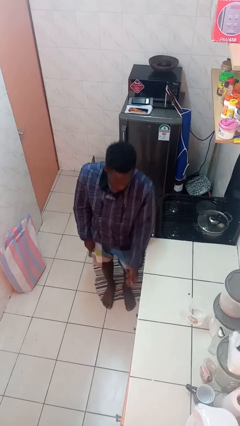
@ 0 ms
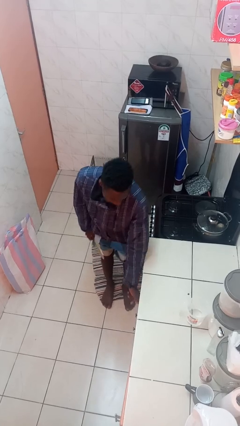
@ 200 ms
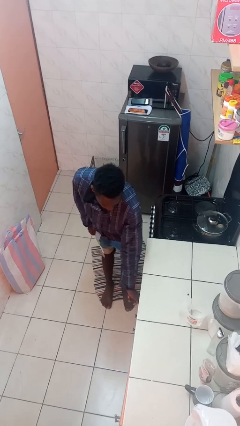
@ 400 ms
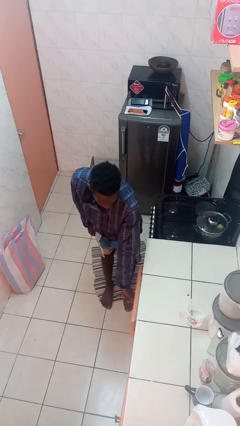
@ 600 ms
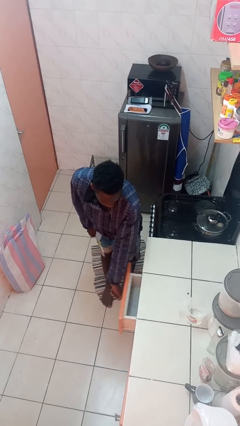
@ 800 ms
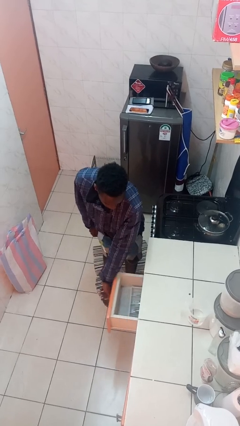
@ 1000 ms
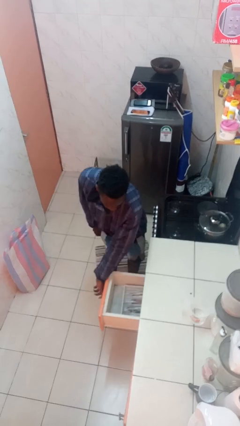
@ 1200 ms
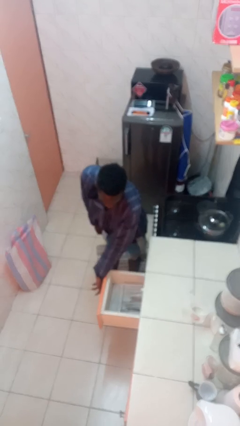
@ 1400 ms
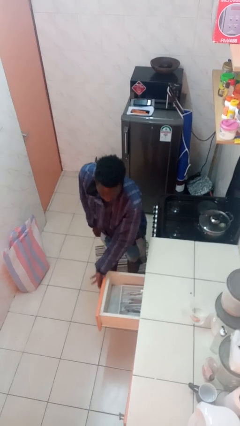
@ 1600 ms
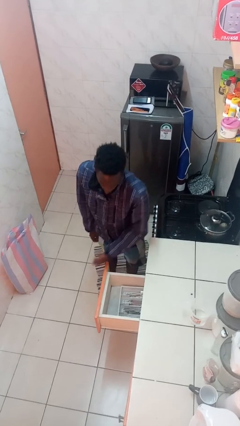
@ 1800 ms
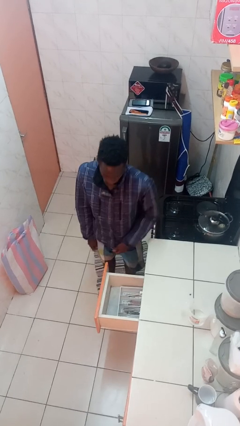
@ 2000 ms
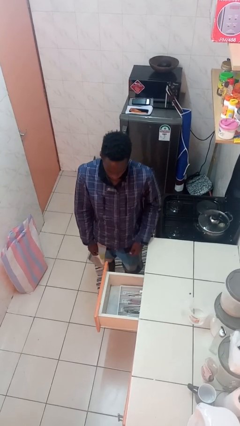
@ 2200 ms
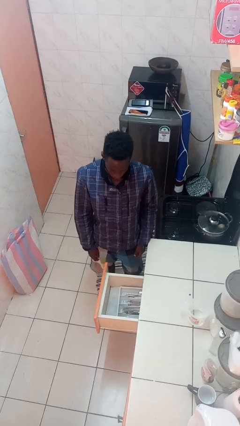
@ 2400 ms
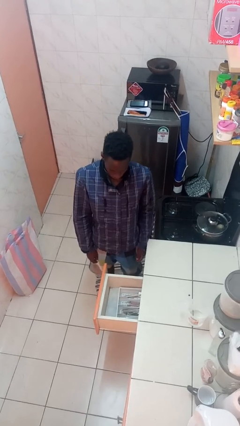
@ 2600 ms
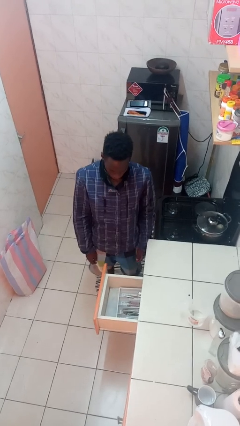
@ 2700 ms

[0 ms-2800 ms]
person opens kitchen drawer

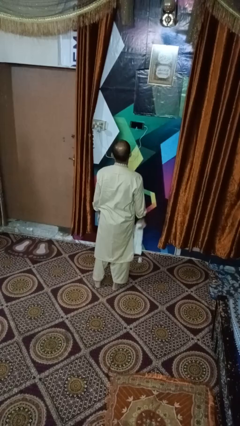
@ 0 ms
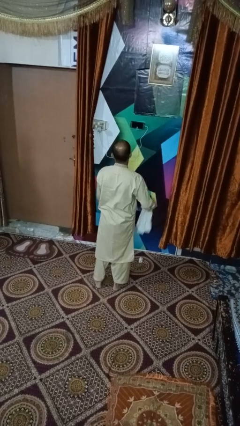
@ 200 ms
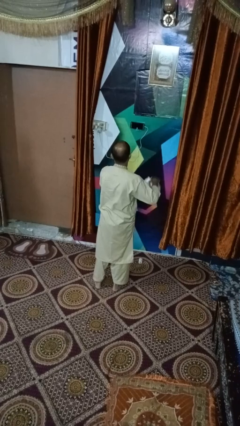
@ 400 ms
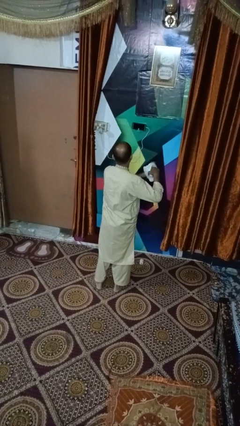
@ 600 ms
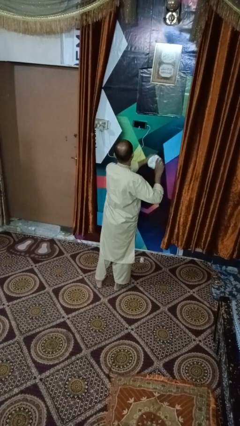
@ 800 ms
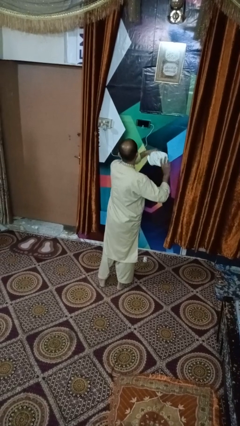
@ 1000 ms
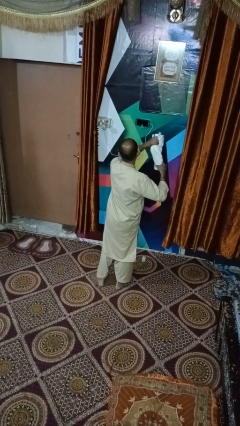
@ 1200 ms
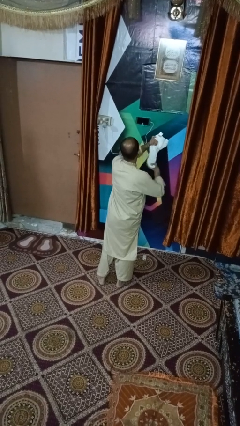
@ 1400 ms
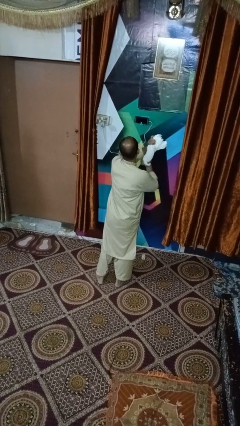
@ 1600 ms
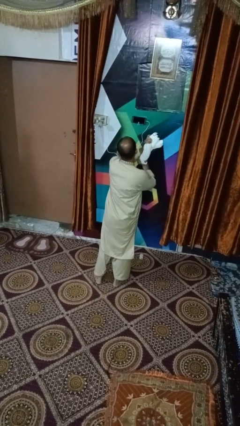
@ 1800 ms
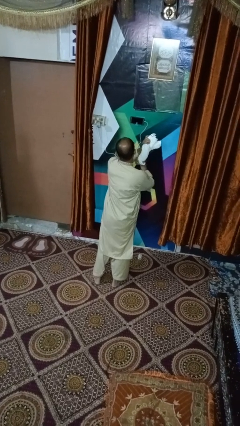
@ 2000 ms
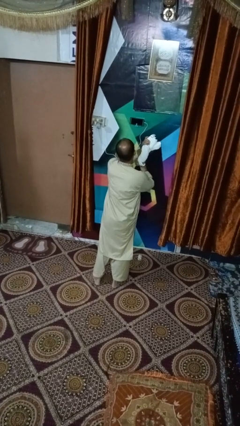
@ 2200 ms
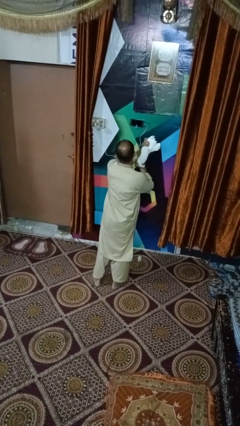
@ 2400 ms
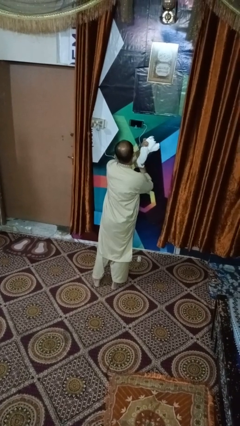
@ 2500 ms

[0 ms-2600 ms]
person squeezes object

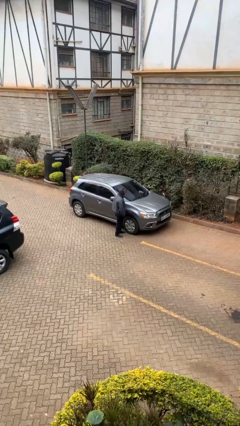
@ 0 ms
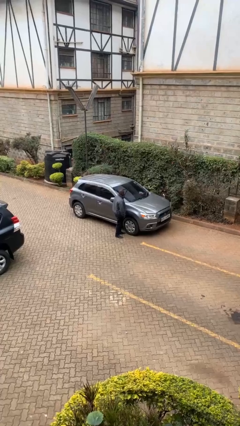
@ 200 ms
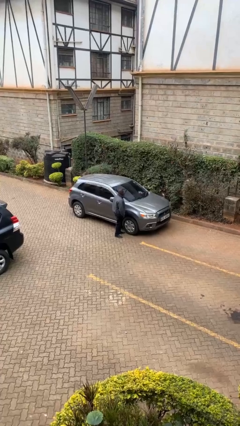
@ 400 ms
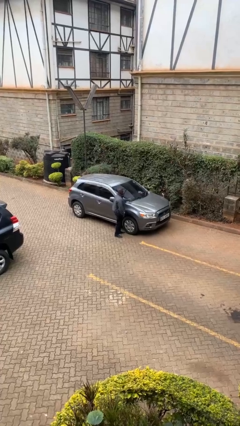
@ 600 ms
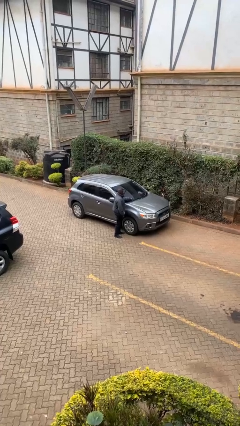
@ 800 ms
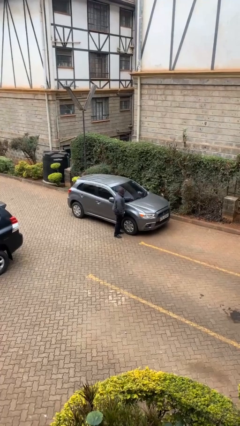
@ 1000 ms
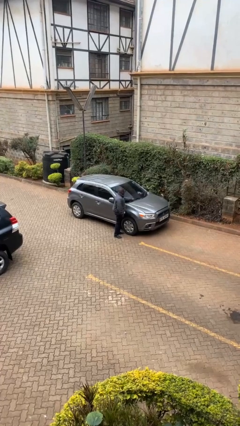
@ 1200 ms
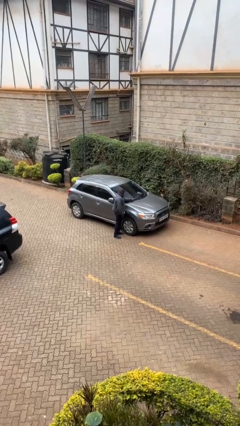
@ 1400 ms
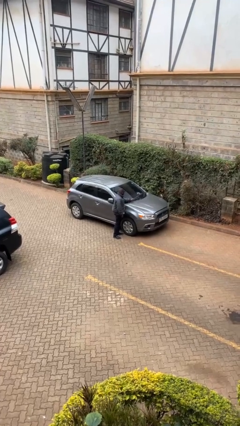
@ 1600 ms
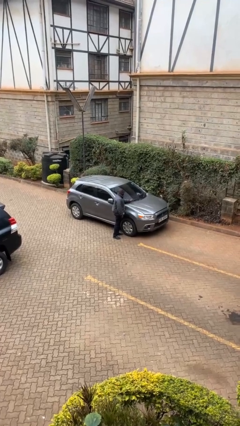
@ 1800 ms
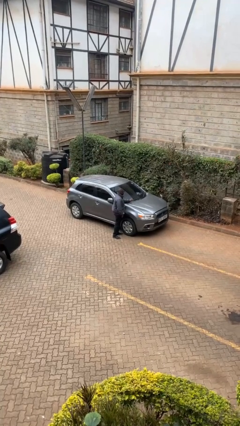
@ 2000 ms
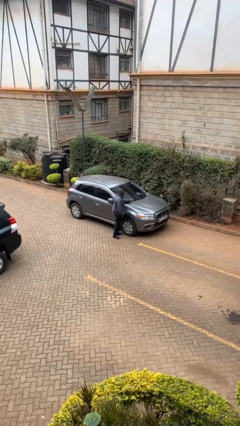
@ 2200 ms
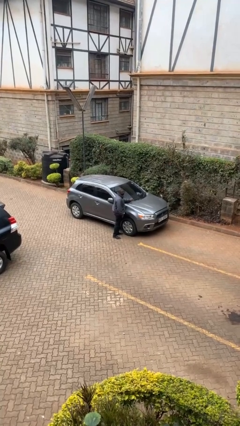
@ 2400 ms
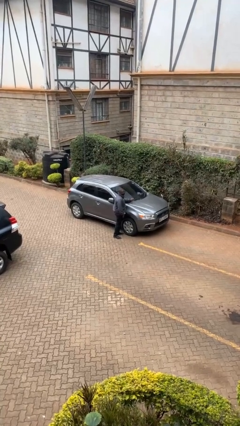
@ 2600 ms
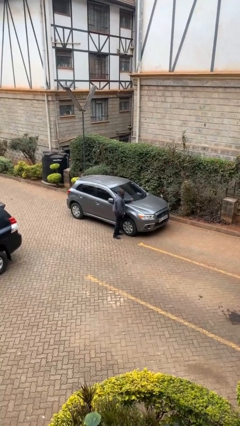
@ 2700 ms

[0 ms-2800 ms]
person flips up car wipers

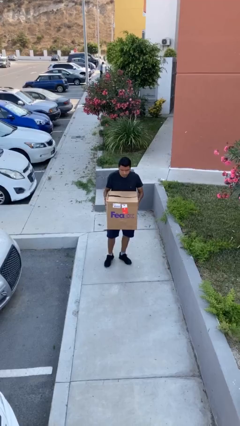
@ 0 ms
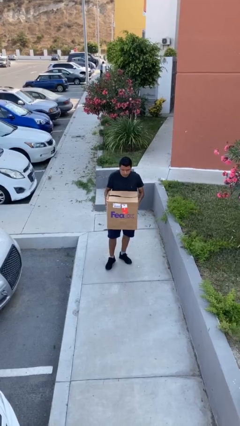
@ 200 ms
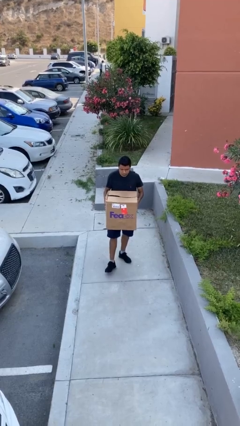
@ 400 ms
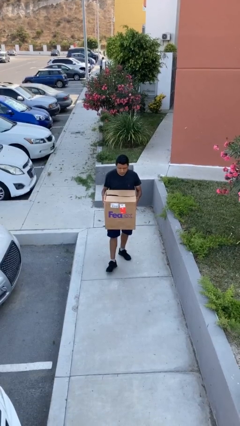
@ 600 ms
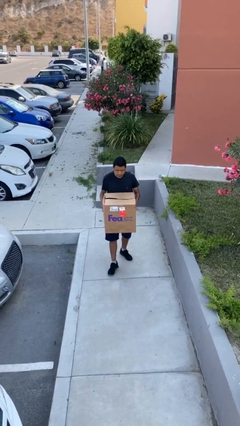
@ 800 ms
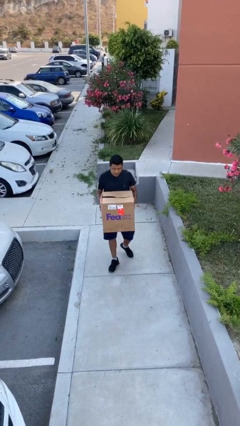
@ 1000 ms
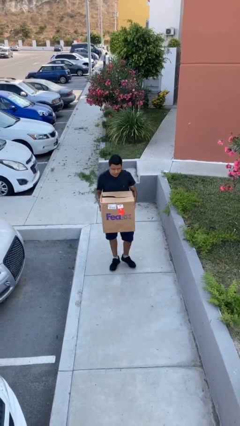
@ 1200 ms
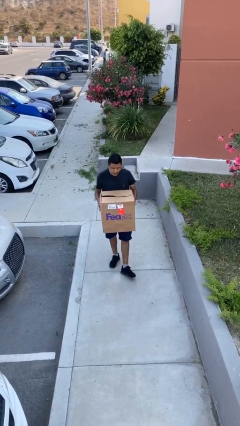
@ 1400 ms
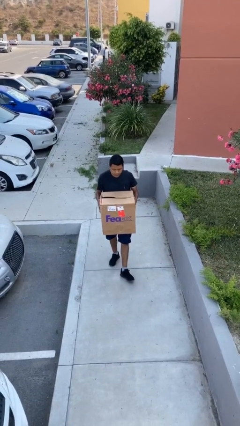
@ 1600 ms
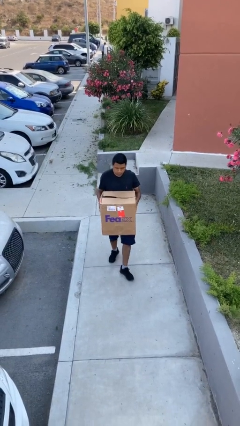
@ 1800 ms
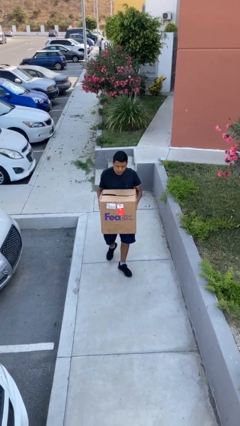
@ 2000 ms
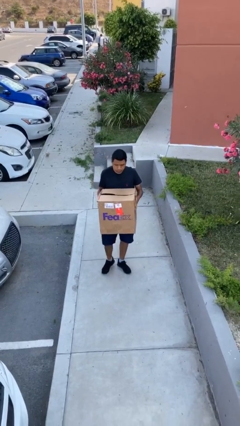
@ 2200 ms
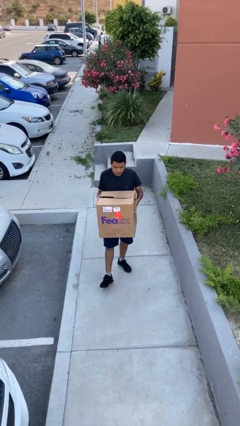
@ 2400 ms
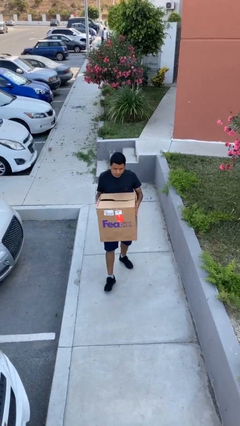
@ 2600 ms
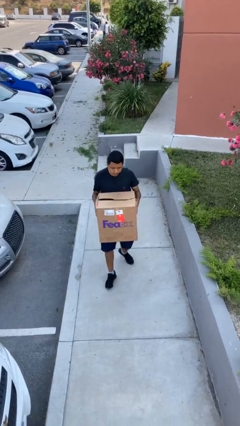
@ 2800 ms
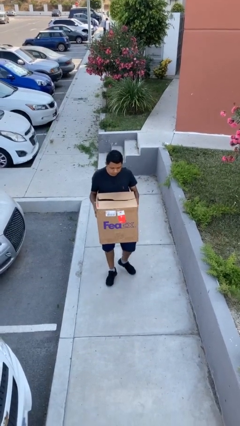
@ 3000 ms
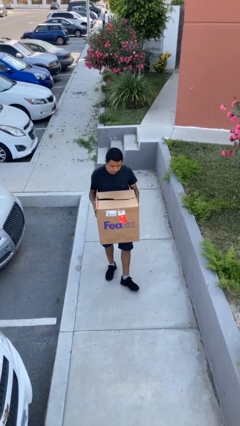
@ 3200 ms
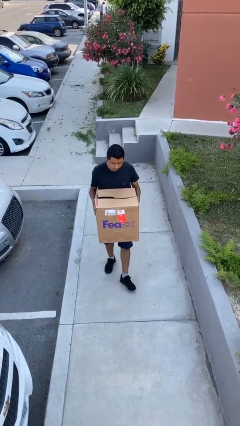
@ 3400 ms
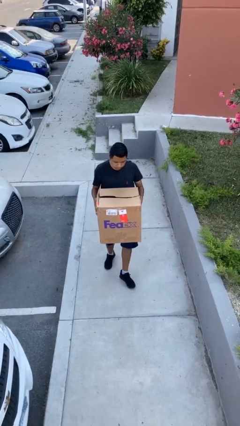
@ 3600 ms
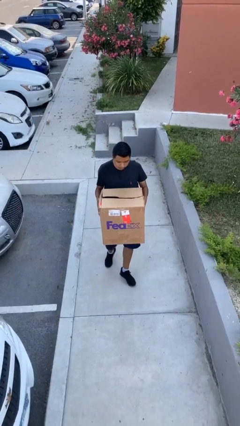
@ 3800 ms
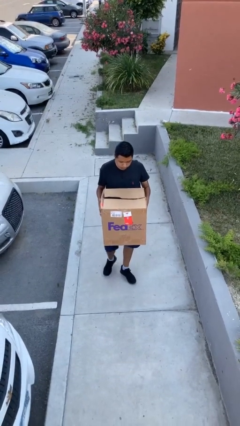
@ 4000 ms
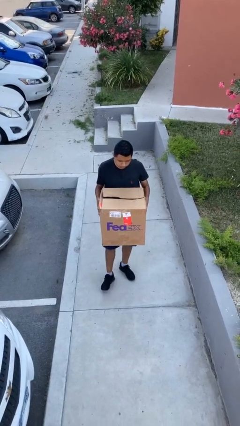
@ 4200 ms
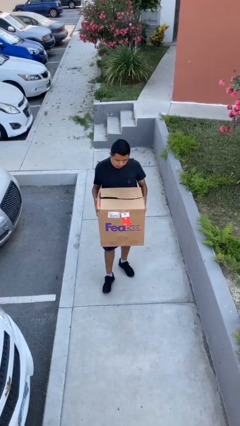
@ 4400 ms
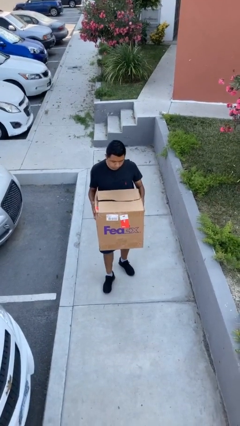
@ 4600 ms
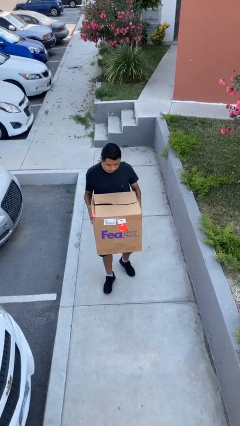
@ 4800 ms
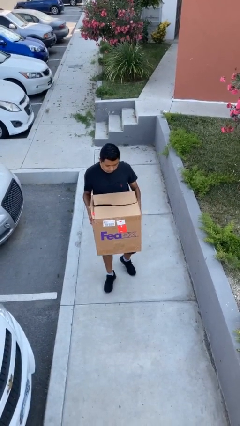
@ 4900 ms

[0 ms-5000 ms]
person carries heavy object

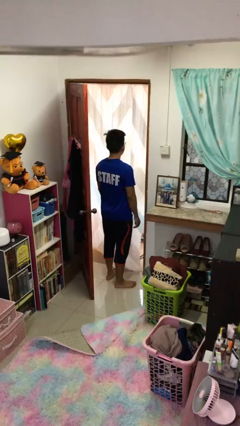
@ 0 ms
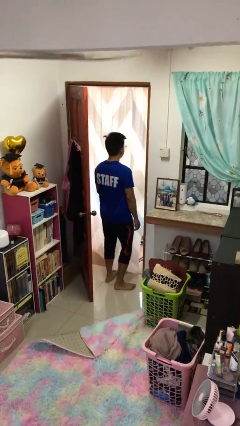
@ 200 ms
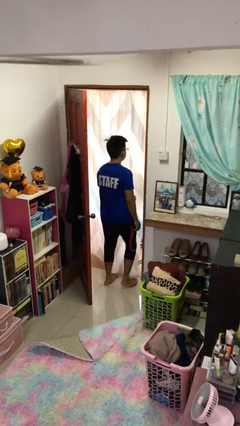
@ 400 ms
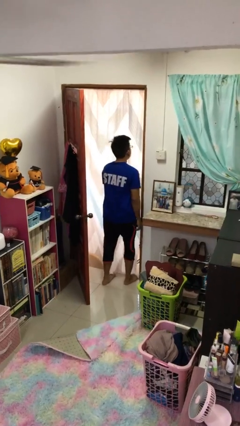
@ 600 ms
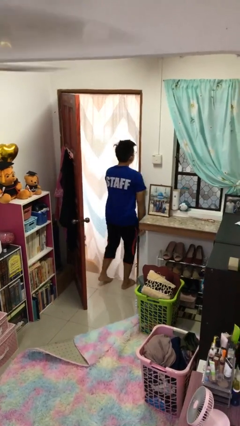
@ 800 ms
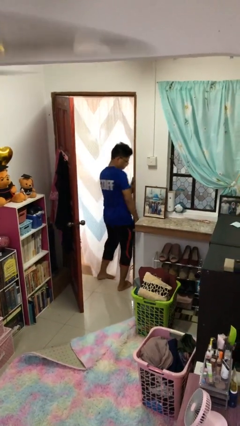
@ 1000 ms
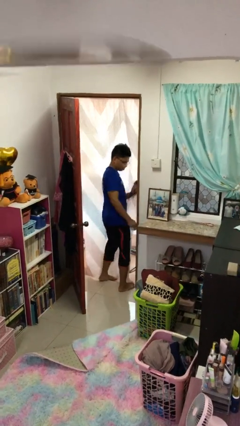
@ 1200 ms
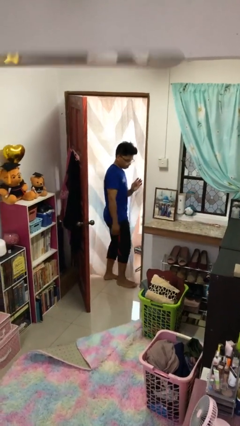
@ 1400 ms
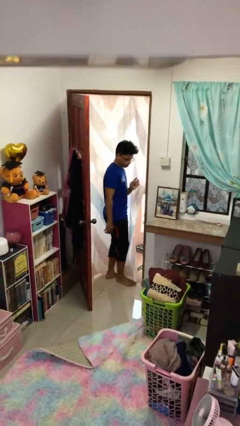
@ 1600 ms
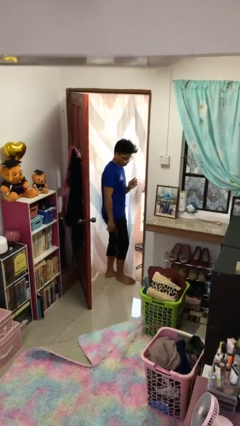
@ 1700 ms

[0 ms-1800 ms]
person bumps into wall

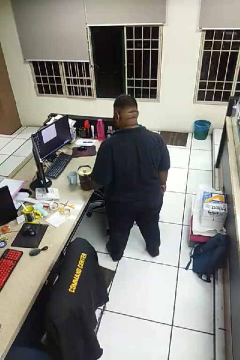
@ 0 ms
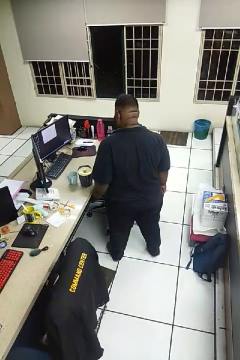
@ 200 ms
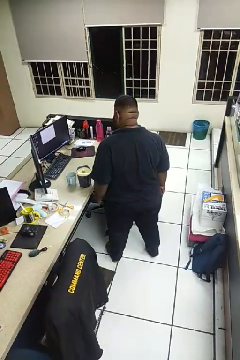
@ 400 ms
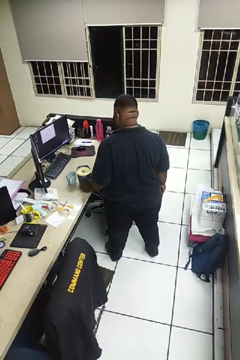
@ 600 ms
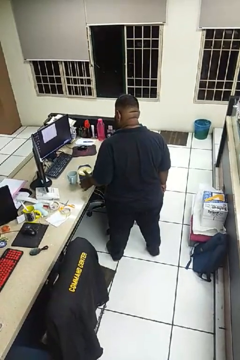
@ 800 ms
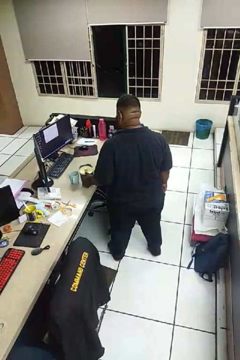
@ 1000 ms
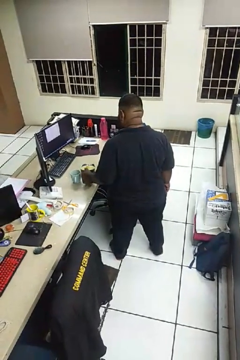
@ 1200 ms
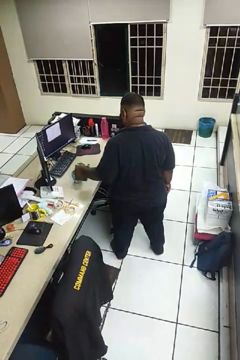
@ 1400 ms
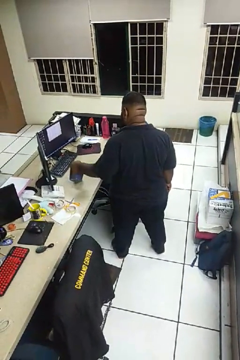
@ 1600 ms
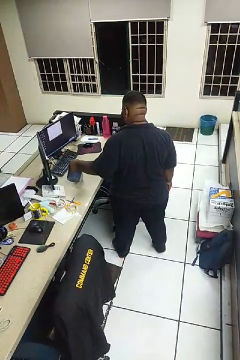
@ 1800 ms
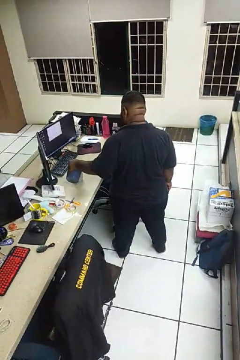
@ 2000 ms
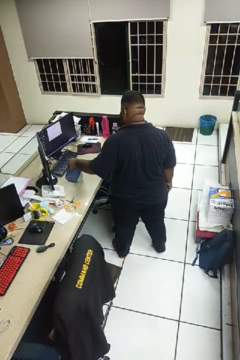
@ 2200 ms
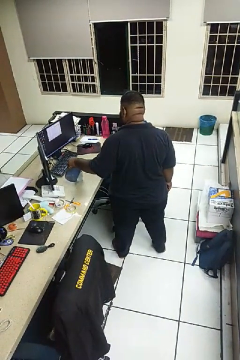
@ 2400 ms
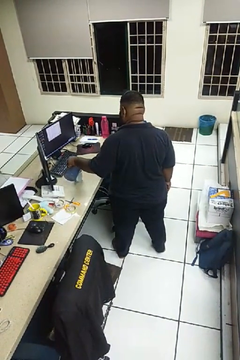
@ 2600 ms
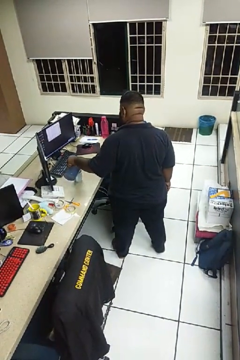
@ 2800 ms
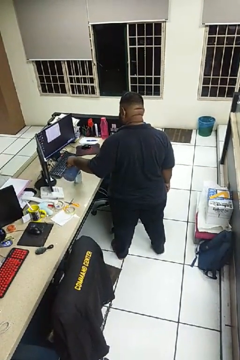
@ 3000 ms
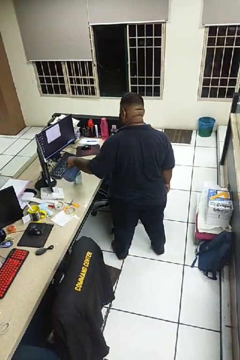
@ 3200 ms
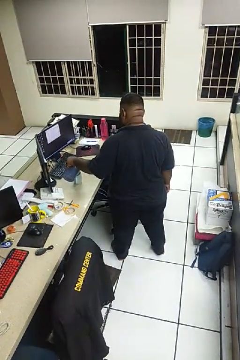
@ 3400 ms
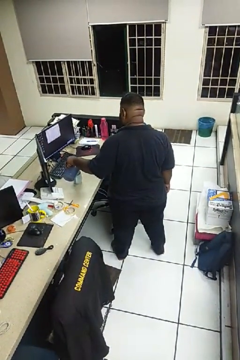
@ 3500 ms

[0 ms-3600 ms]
person pours coffee into mug
